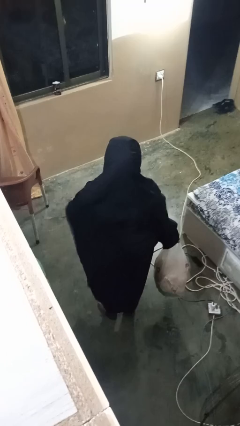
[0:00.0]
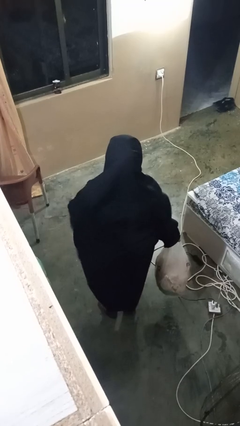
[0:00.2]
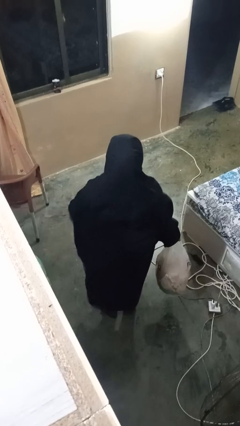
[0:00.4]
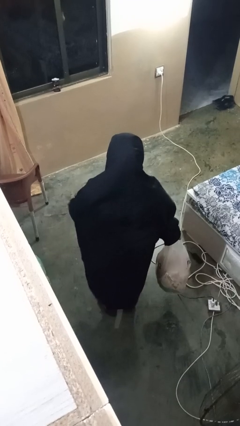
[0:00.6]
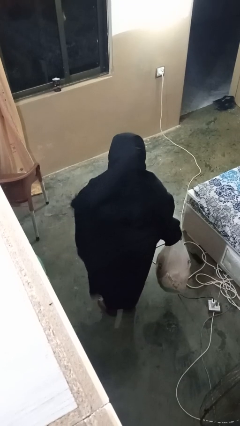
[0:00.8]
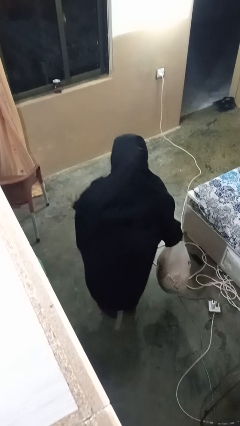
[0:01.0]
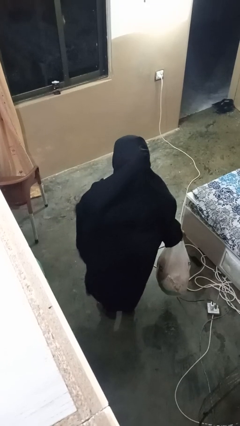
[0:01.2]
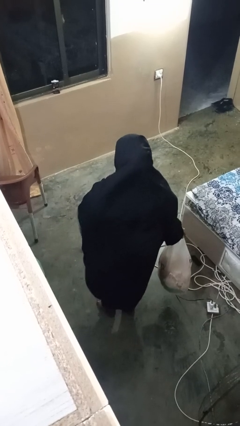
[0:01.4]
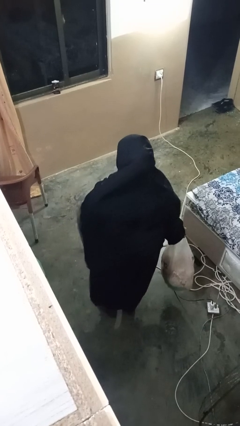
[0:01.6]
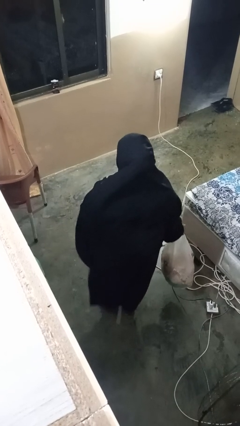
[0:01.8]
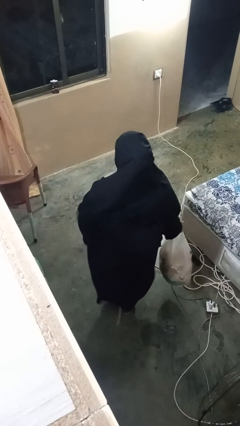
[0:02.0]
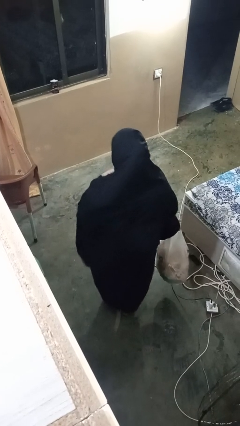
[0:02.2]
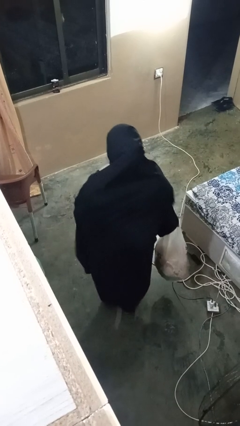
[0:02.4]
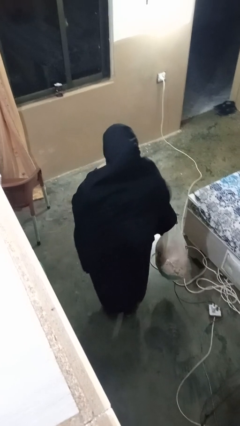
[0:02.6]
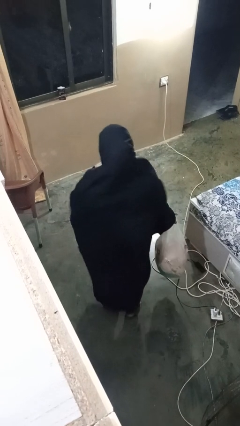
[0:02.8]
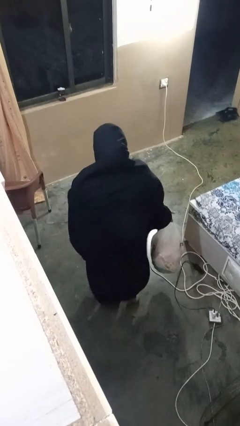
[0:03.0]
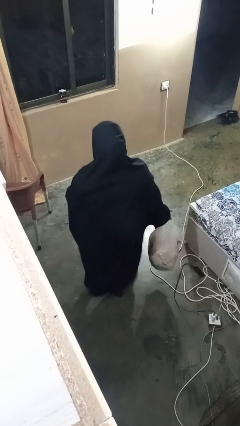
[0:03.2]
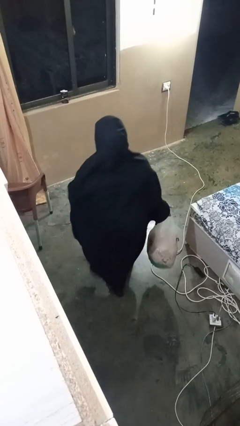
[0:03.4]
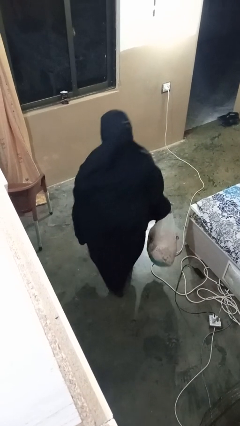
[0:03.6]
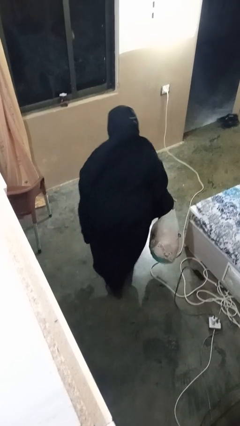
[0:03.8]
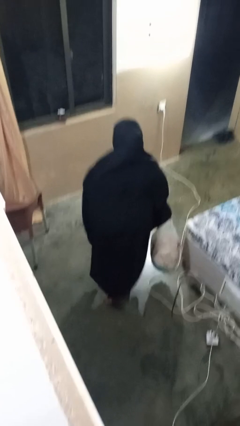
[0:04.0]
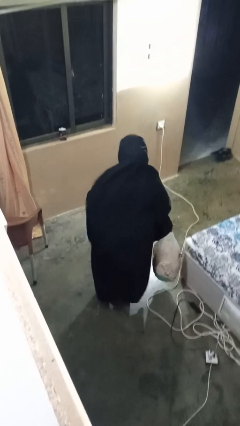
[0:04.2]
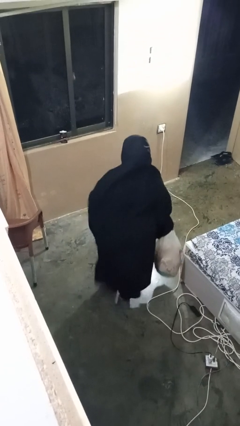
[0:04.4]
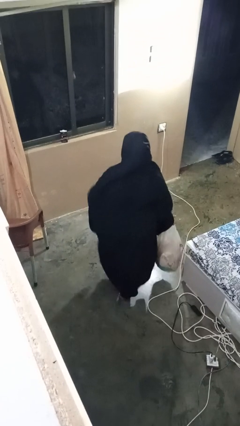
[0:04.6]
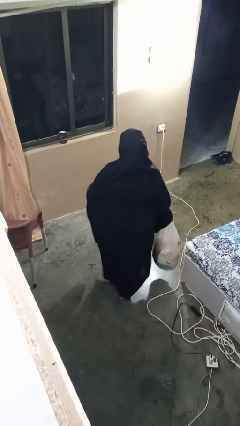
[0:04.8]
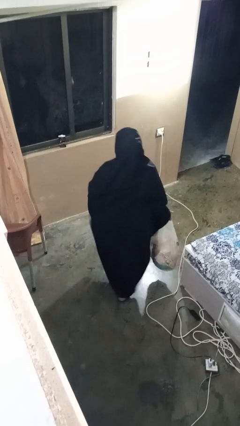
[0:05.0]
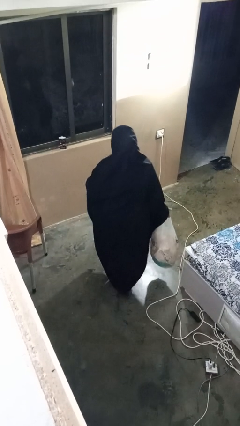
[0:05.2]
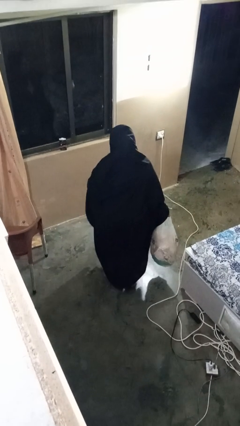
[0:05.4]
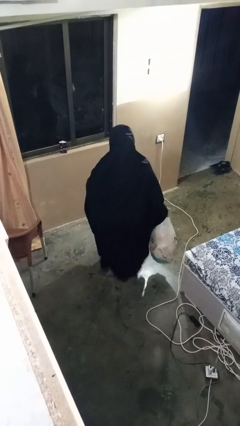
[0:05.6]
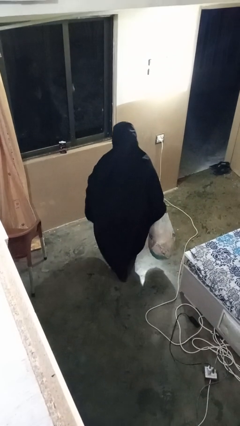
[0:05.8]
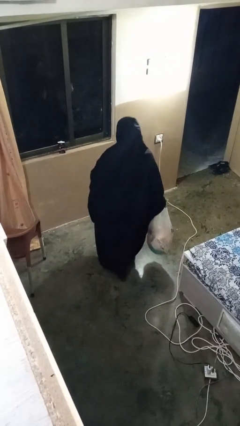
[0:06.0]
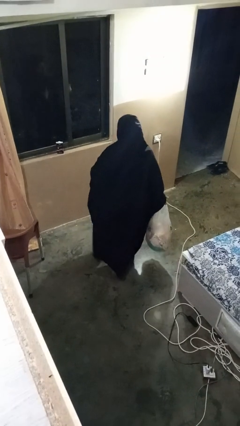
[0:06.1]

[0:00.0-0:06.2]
person carries groceries

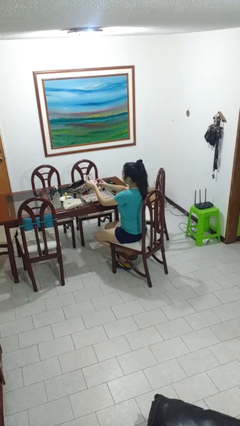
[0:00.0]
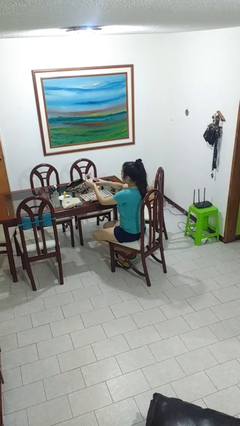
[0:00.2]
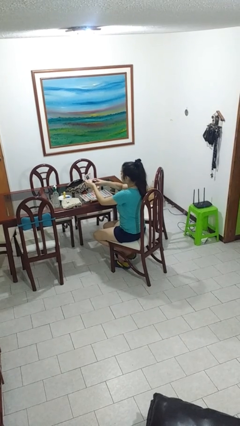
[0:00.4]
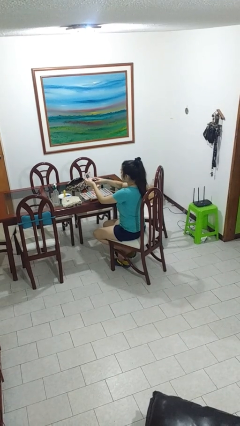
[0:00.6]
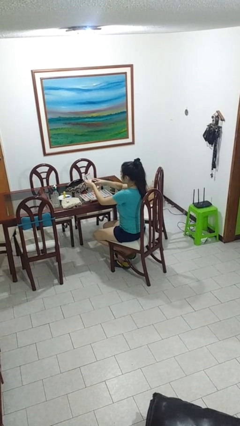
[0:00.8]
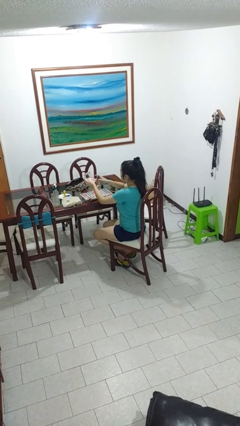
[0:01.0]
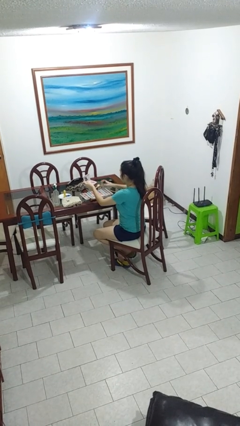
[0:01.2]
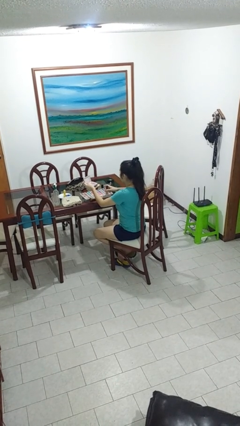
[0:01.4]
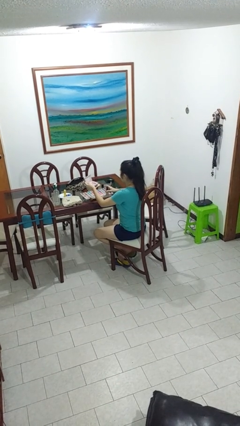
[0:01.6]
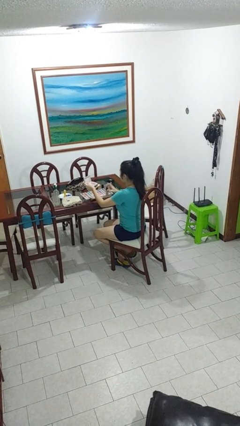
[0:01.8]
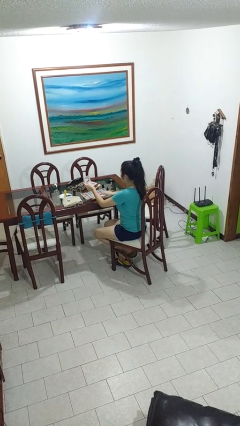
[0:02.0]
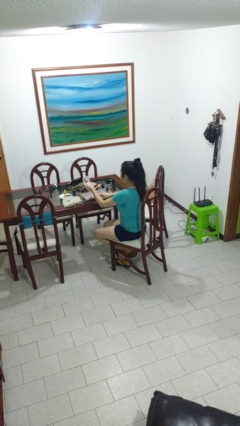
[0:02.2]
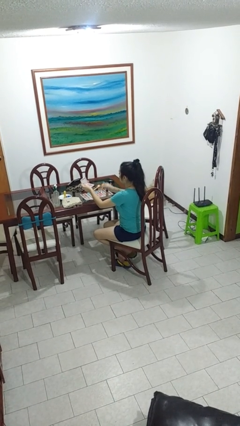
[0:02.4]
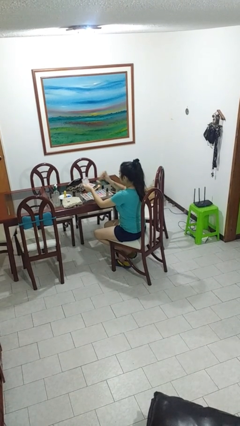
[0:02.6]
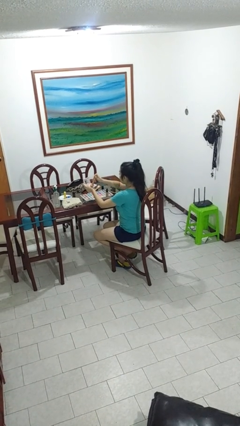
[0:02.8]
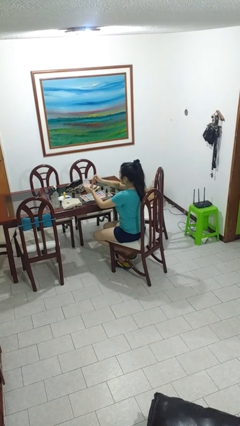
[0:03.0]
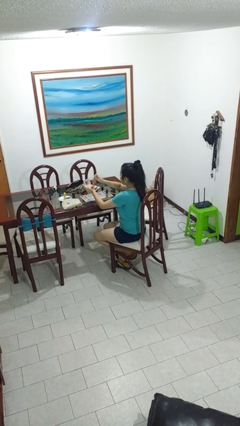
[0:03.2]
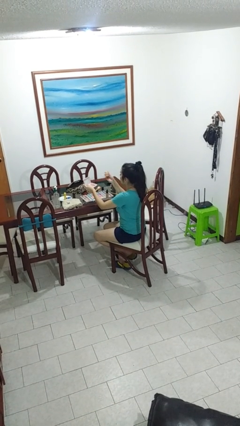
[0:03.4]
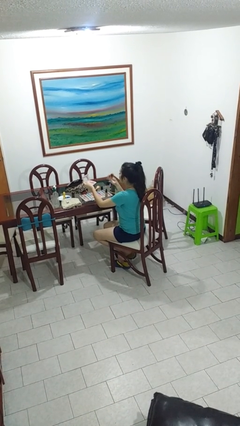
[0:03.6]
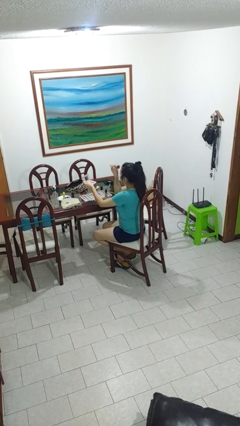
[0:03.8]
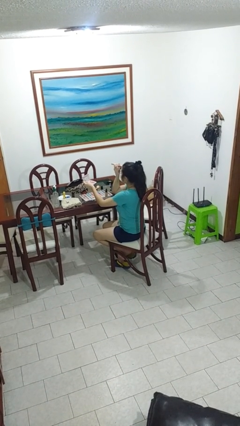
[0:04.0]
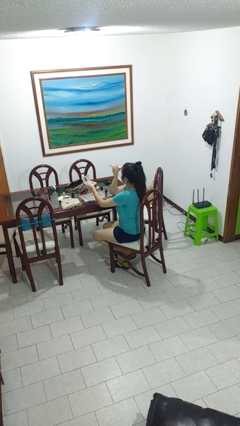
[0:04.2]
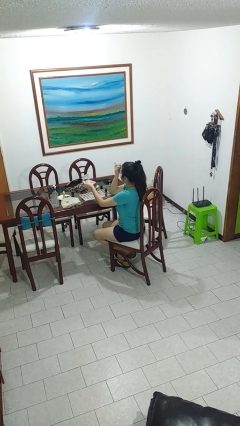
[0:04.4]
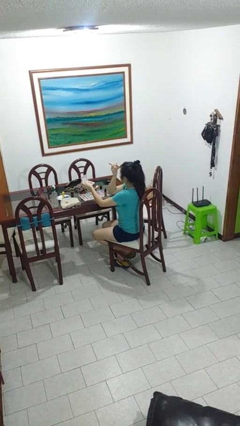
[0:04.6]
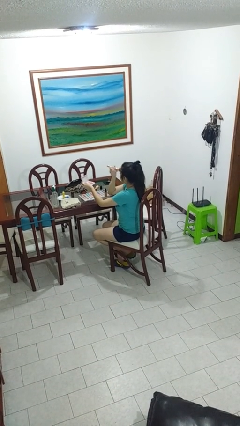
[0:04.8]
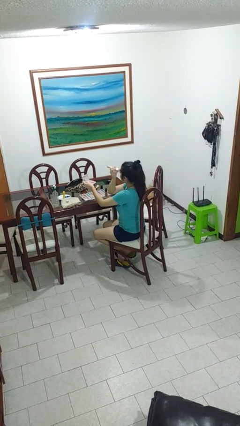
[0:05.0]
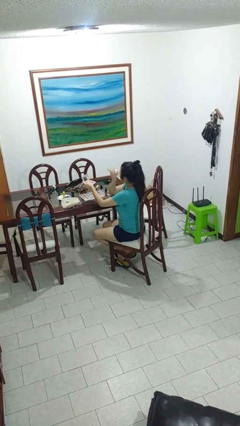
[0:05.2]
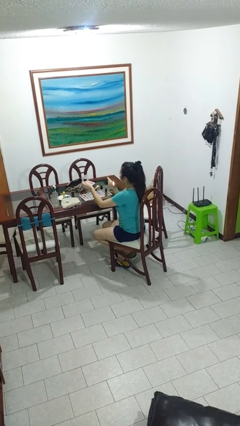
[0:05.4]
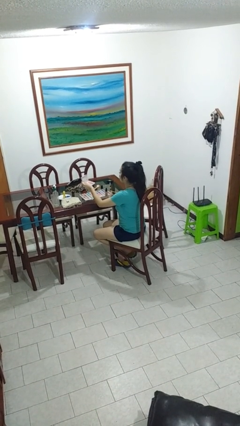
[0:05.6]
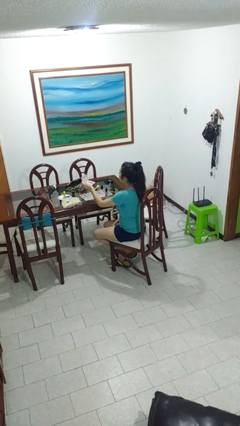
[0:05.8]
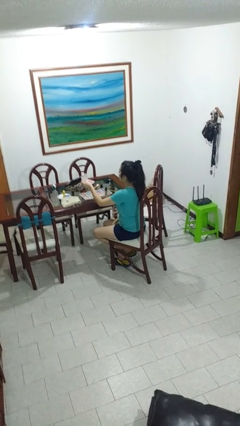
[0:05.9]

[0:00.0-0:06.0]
person applies foundation makeup

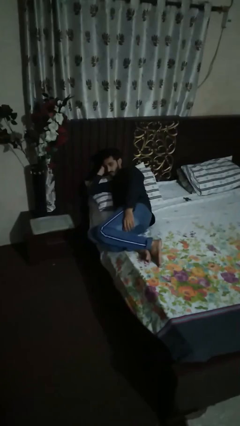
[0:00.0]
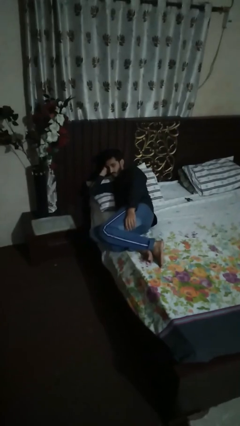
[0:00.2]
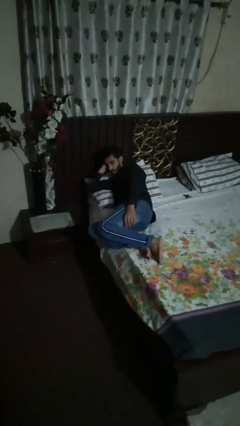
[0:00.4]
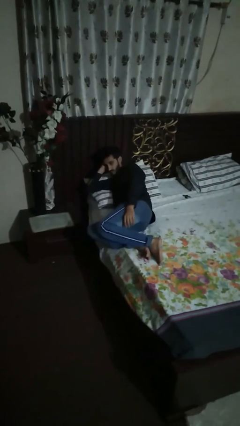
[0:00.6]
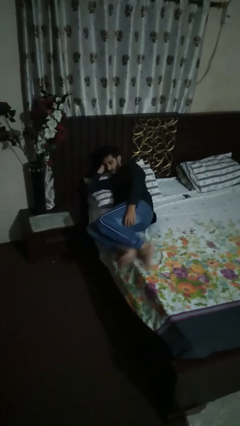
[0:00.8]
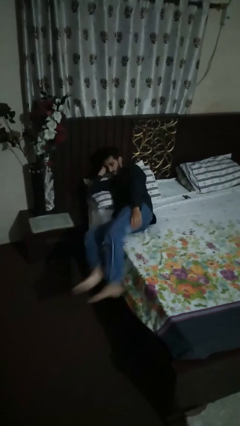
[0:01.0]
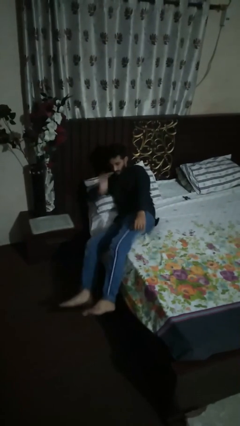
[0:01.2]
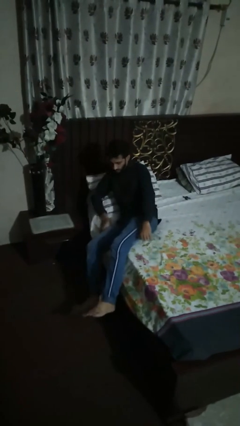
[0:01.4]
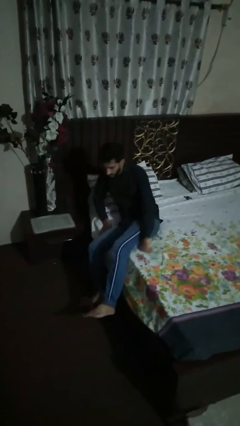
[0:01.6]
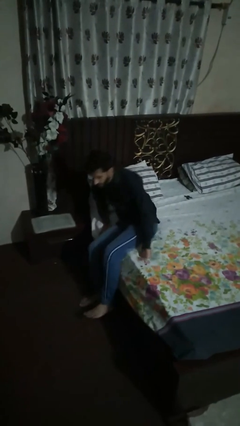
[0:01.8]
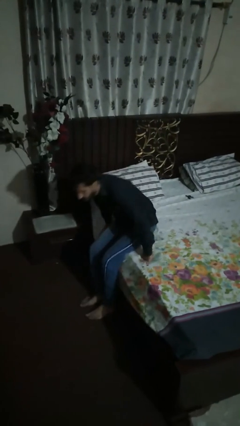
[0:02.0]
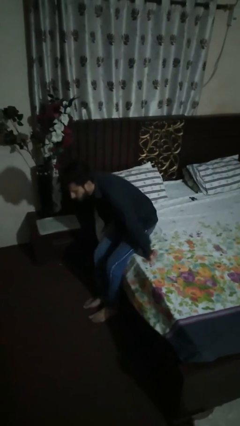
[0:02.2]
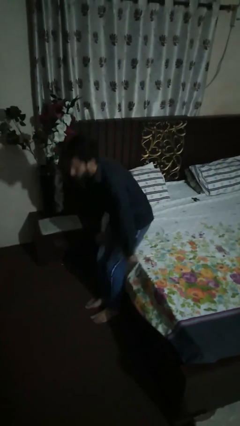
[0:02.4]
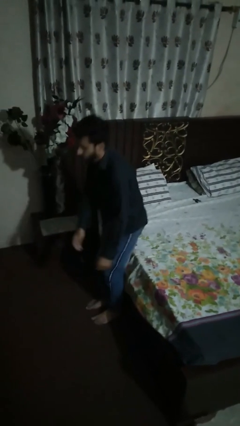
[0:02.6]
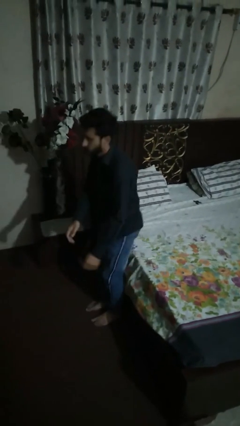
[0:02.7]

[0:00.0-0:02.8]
person stands up

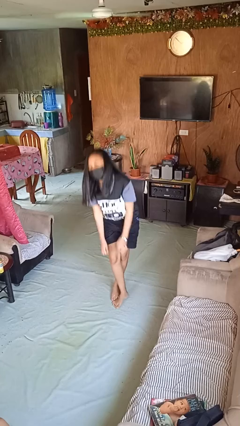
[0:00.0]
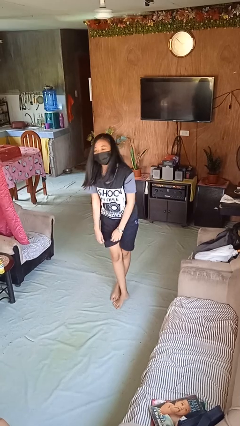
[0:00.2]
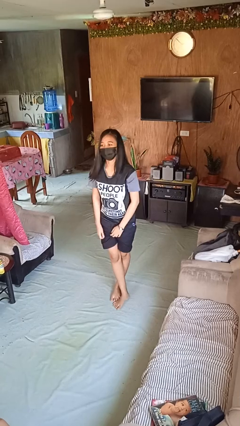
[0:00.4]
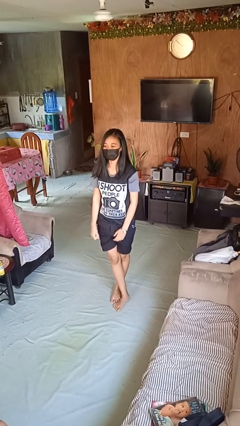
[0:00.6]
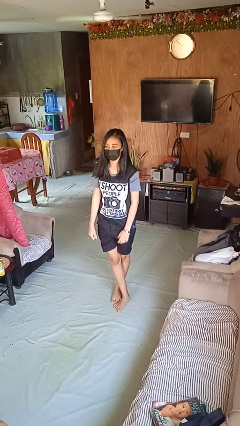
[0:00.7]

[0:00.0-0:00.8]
person stands up from floor

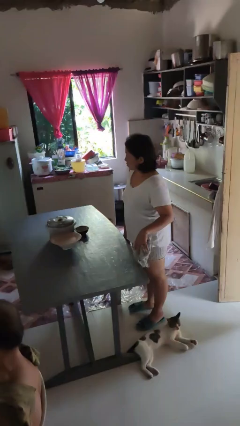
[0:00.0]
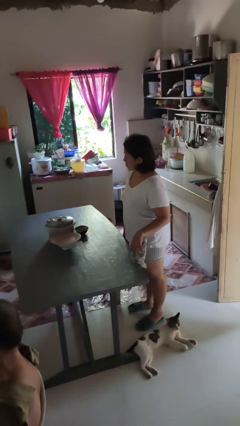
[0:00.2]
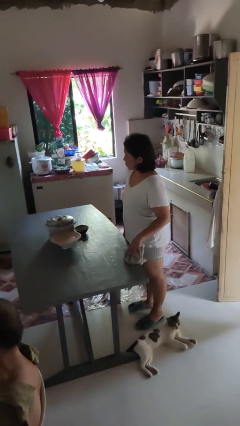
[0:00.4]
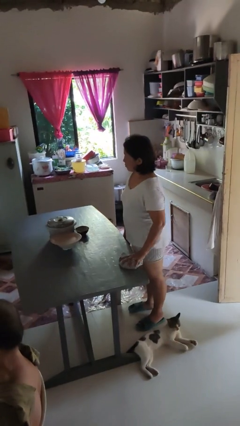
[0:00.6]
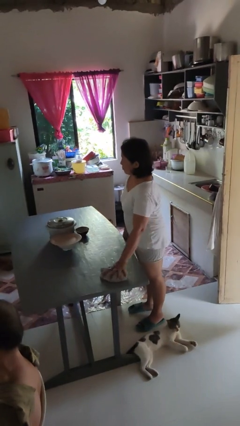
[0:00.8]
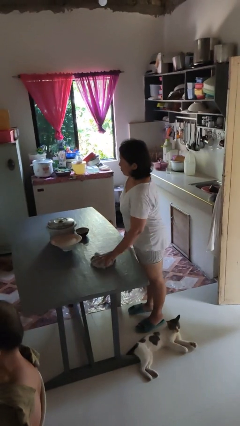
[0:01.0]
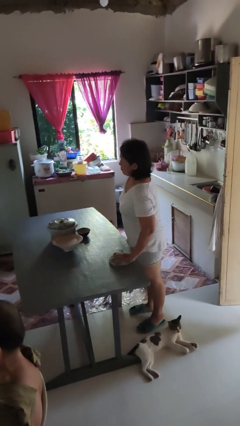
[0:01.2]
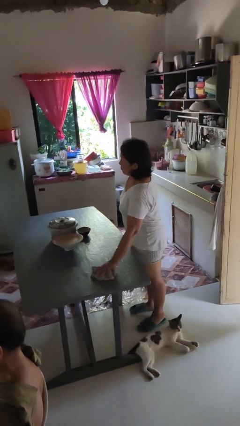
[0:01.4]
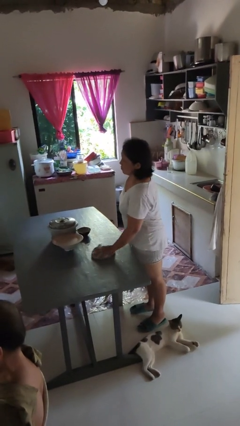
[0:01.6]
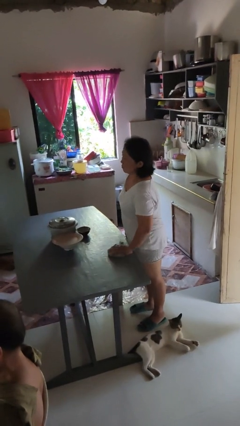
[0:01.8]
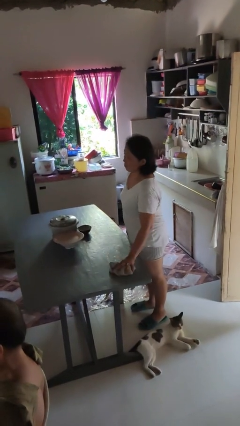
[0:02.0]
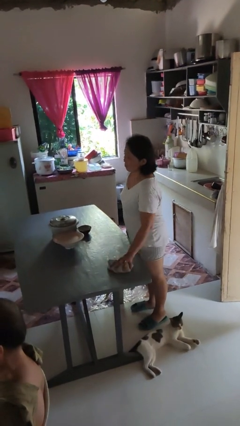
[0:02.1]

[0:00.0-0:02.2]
person cleans table with rag
